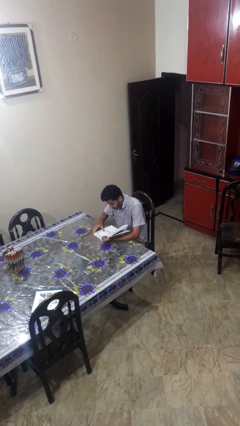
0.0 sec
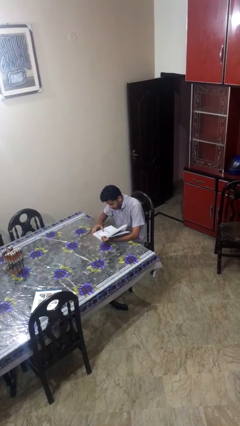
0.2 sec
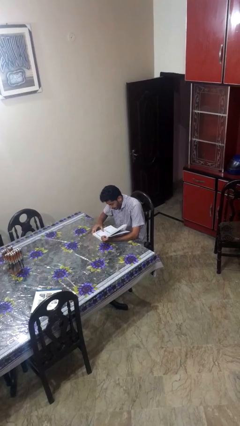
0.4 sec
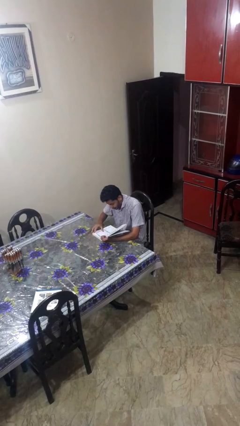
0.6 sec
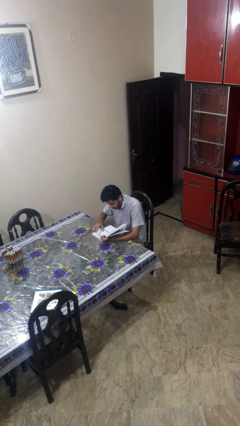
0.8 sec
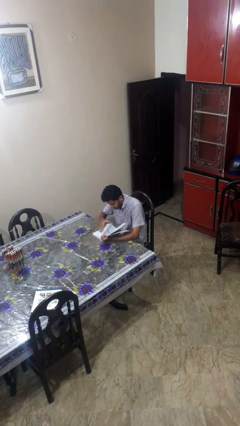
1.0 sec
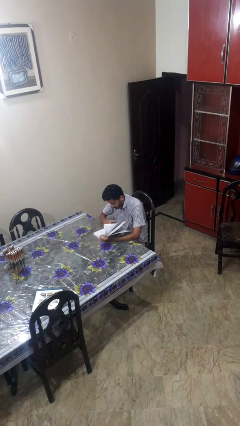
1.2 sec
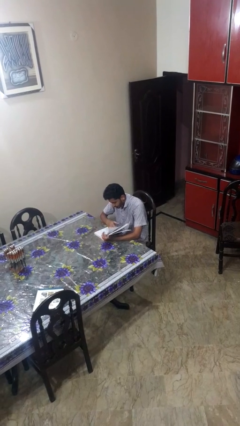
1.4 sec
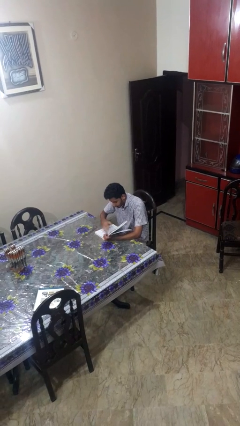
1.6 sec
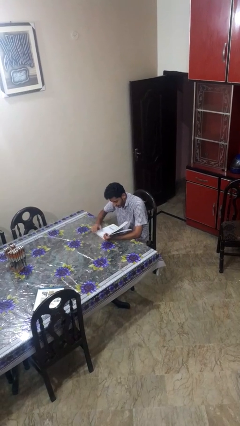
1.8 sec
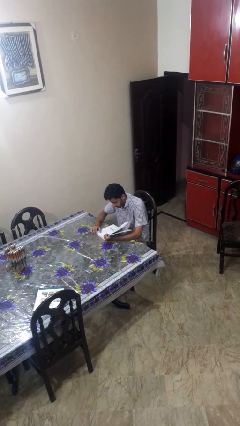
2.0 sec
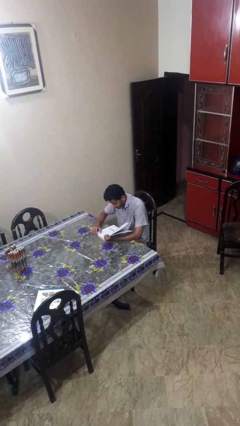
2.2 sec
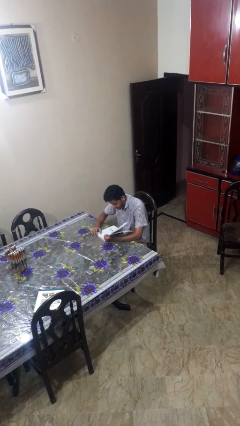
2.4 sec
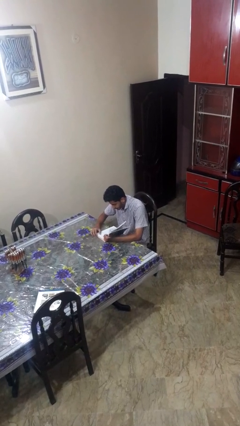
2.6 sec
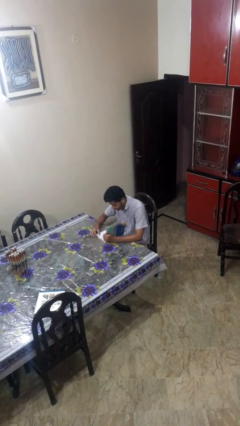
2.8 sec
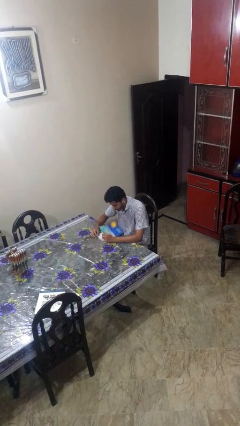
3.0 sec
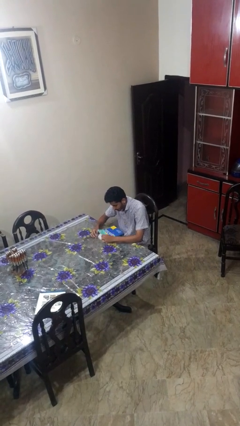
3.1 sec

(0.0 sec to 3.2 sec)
person reads book

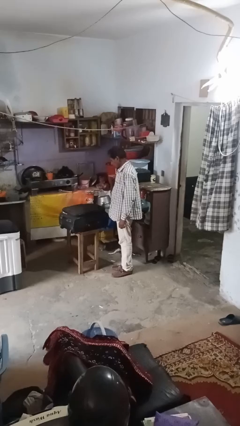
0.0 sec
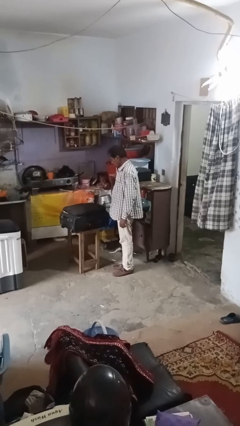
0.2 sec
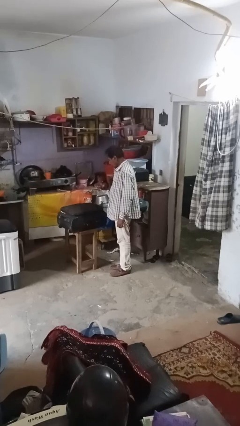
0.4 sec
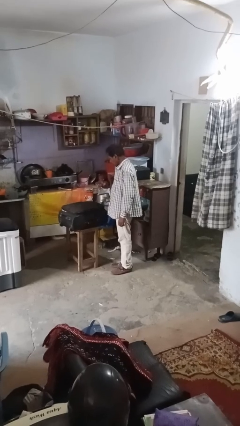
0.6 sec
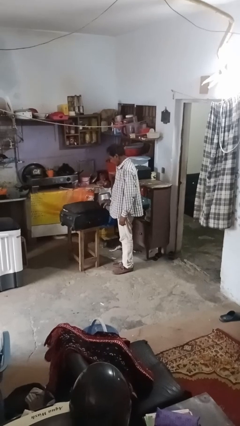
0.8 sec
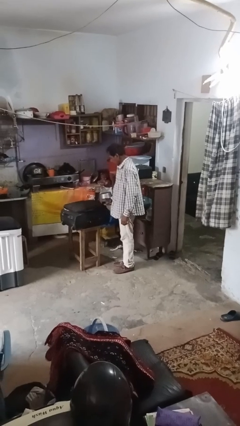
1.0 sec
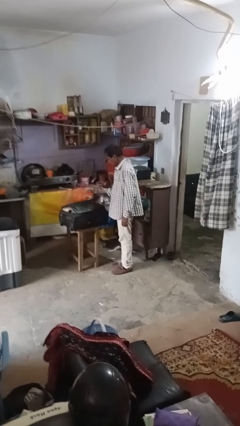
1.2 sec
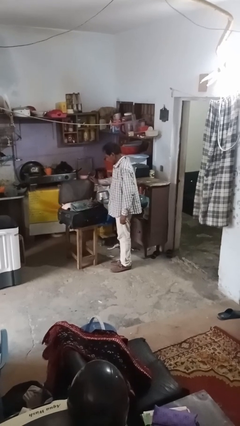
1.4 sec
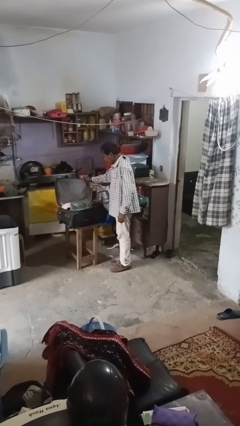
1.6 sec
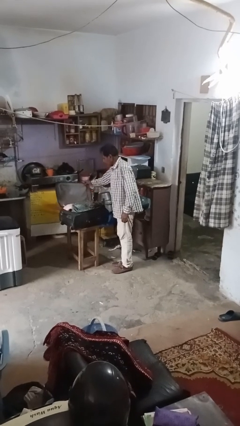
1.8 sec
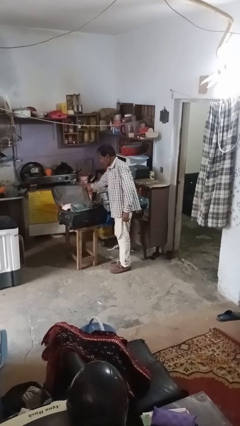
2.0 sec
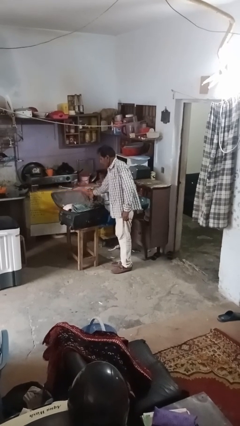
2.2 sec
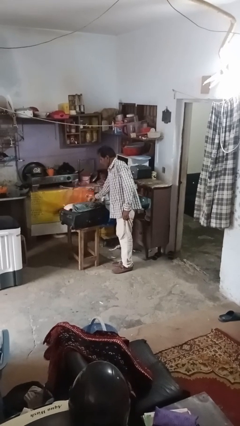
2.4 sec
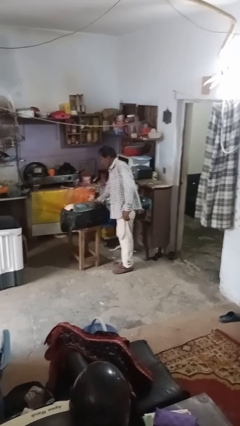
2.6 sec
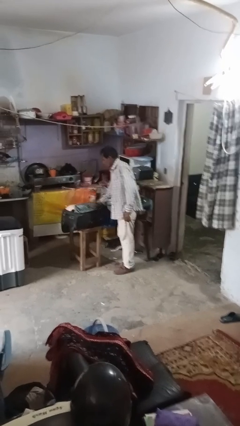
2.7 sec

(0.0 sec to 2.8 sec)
person opens suitcase

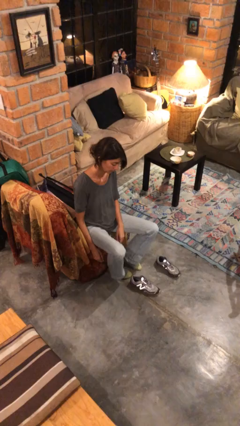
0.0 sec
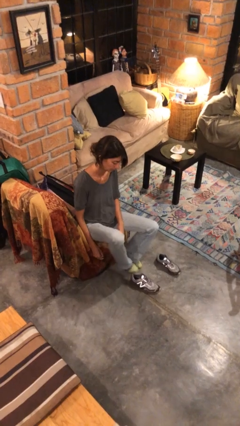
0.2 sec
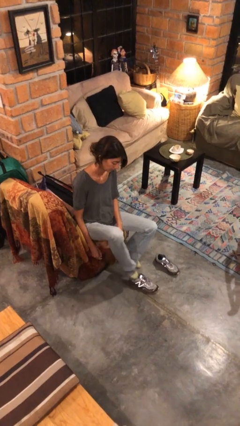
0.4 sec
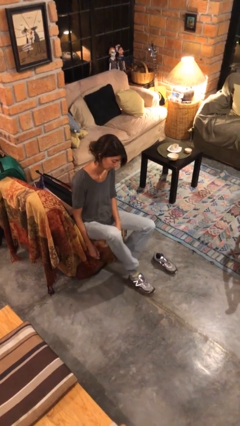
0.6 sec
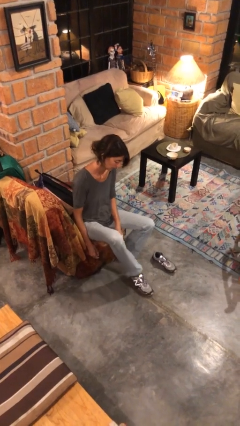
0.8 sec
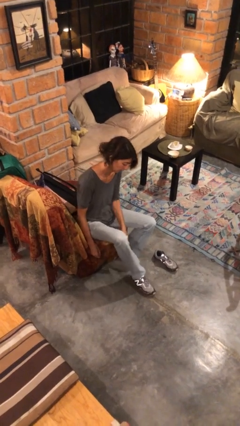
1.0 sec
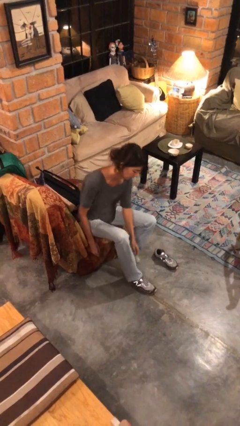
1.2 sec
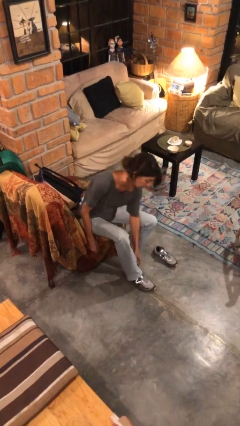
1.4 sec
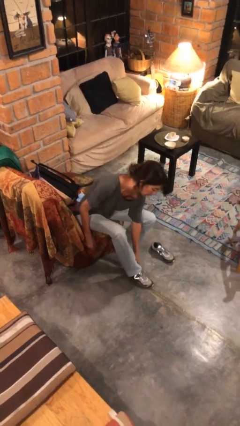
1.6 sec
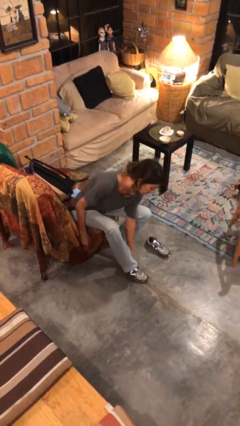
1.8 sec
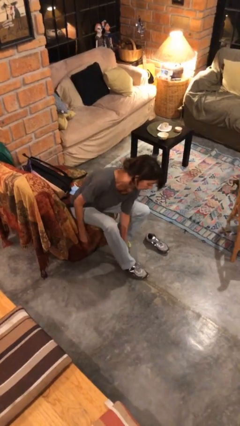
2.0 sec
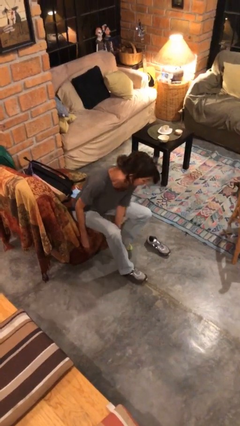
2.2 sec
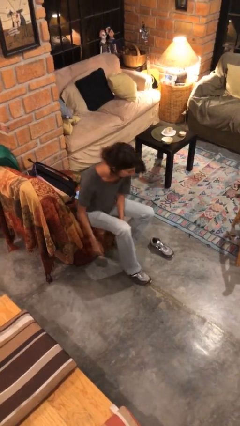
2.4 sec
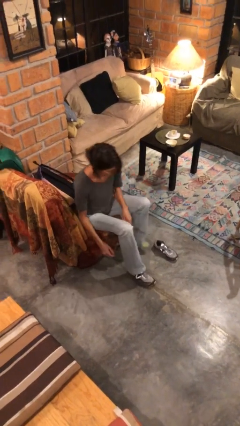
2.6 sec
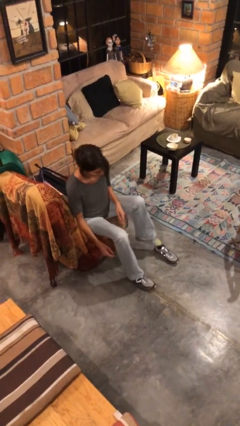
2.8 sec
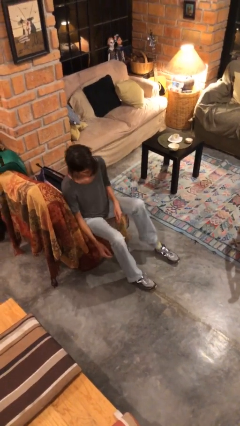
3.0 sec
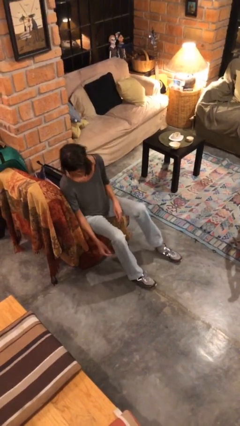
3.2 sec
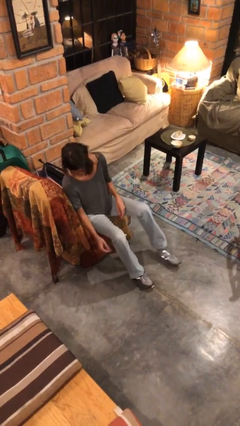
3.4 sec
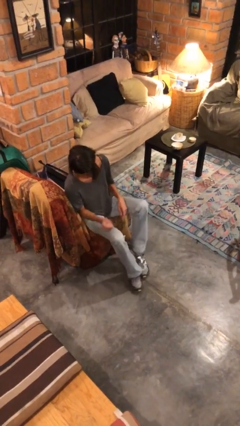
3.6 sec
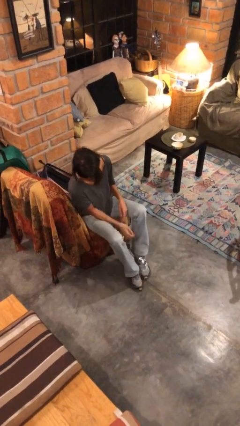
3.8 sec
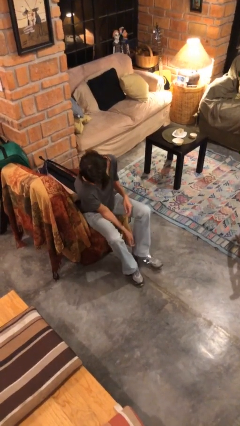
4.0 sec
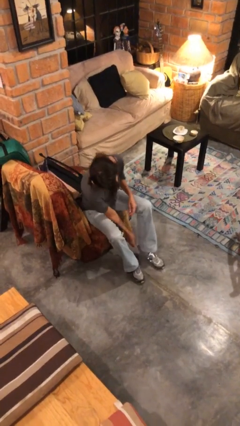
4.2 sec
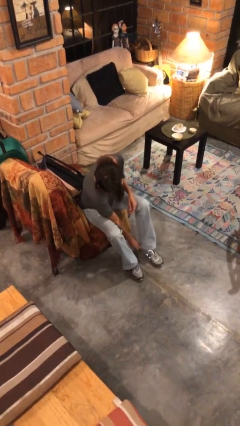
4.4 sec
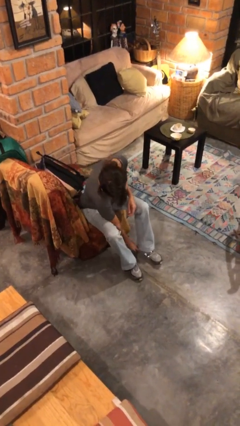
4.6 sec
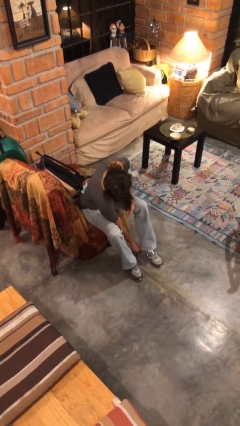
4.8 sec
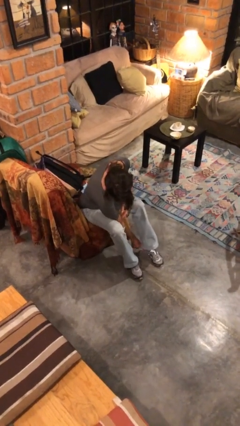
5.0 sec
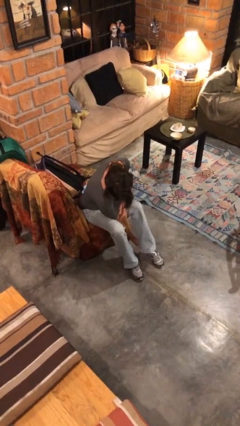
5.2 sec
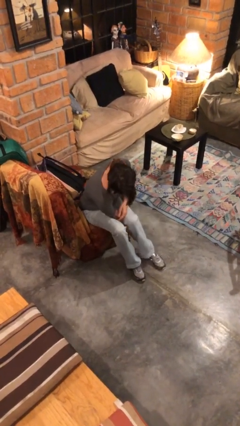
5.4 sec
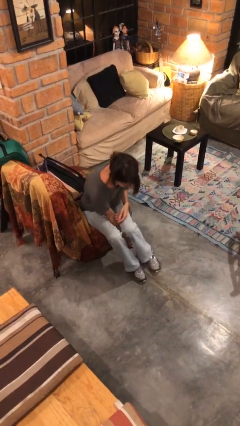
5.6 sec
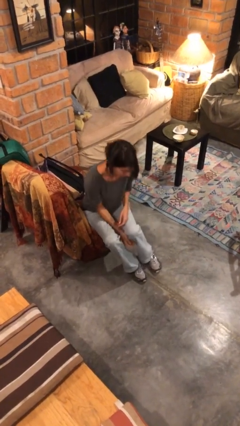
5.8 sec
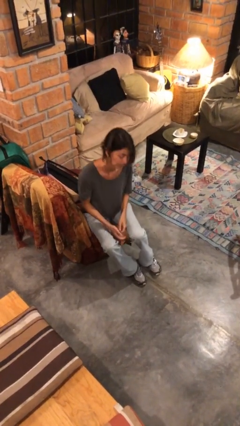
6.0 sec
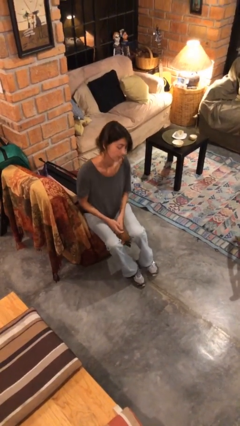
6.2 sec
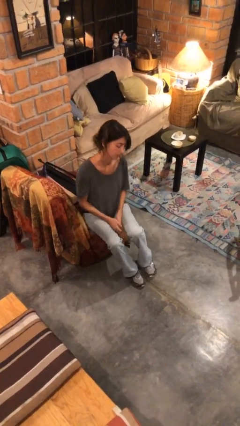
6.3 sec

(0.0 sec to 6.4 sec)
person puts on shoes

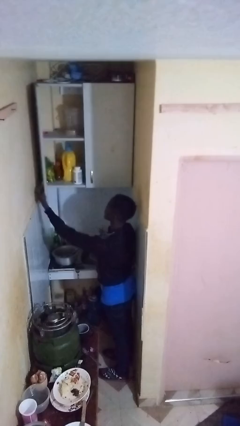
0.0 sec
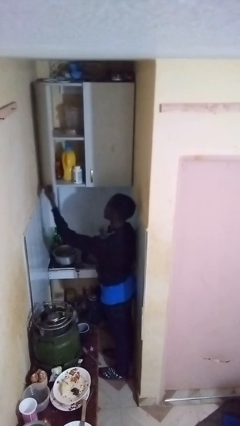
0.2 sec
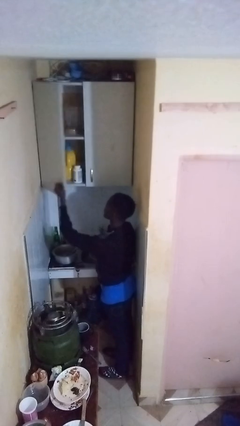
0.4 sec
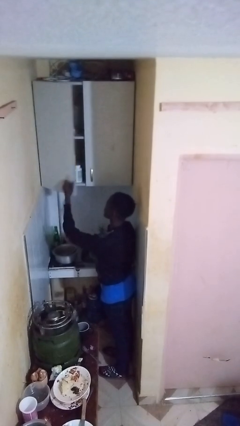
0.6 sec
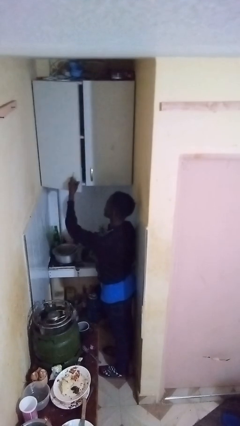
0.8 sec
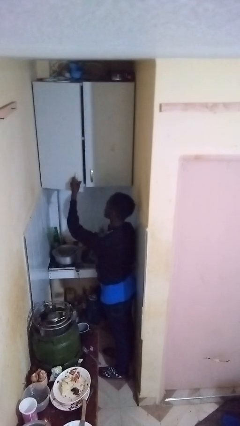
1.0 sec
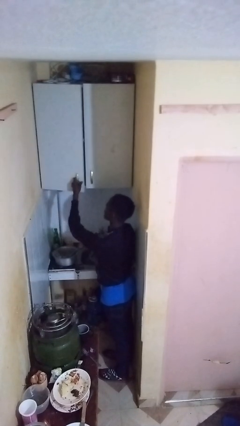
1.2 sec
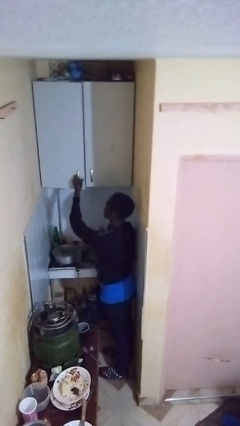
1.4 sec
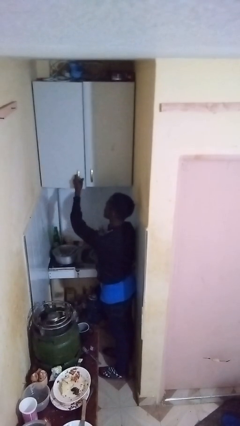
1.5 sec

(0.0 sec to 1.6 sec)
person closes kitchen drawer

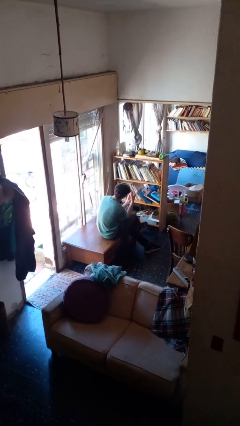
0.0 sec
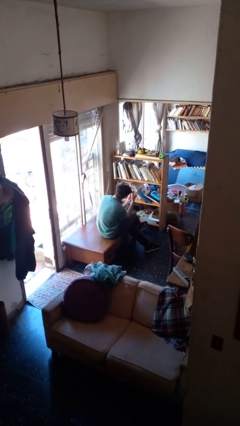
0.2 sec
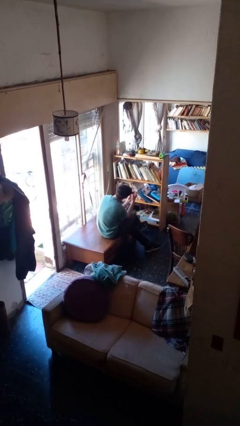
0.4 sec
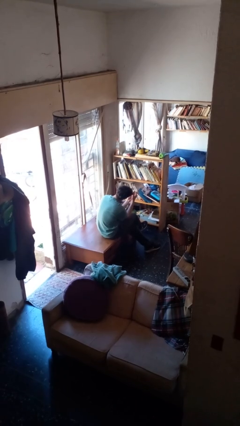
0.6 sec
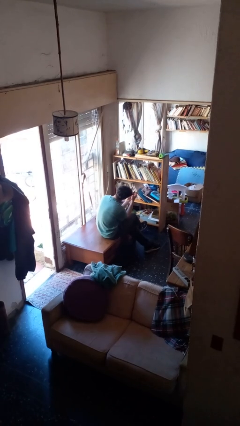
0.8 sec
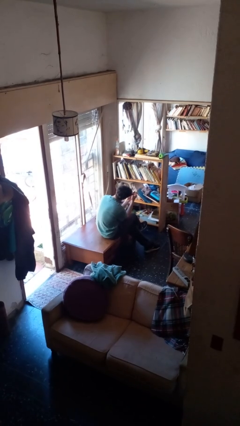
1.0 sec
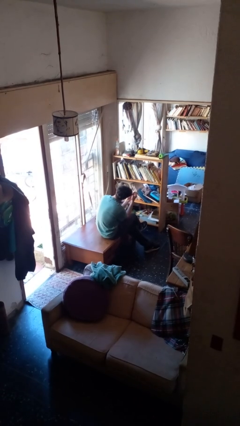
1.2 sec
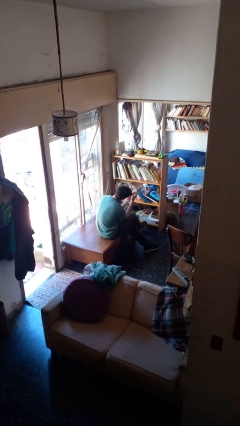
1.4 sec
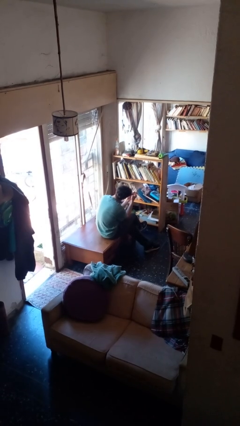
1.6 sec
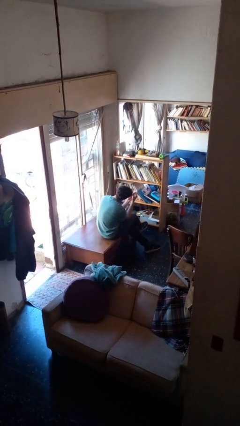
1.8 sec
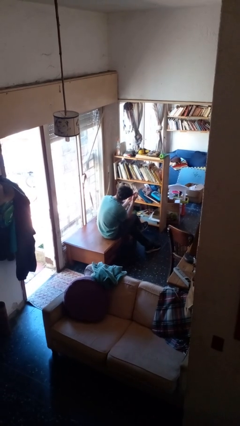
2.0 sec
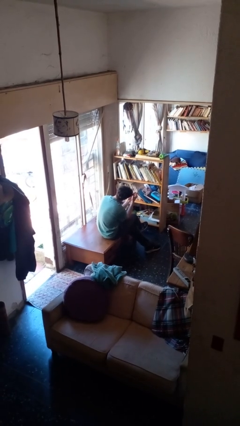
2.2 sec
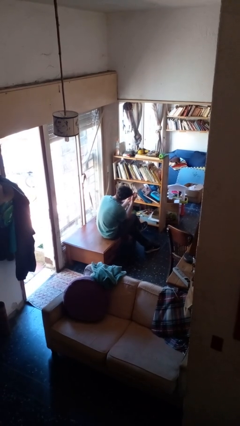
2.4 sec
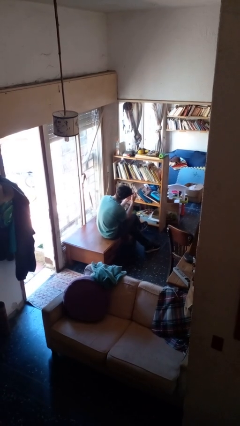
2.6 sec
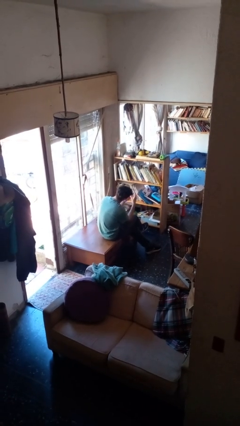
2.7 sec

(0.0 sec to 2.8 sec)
person paints fingernails

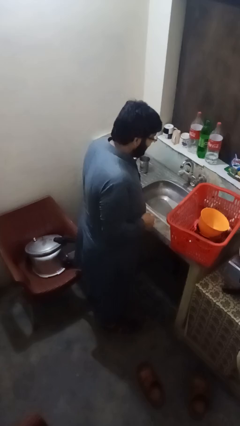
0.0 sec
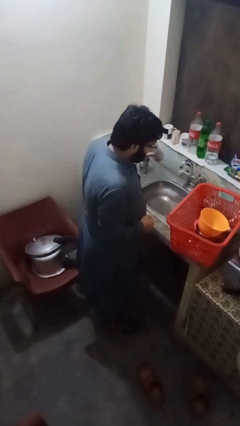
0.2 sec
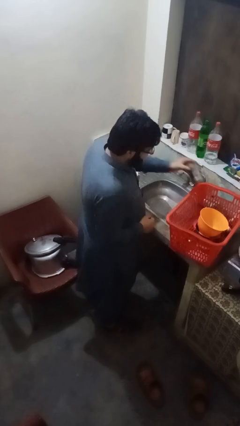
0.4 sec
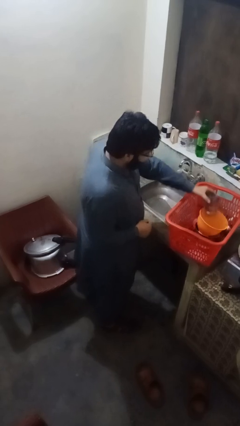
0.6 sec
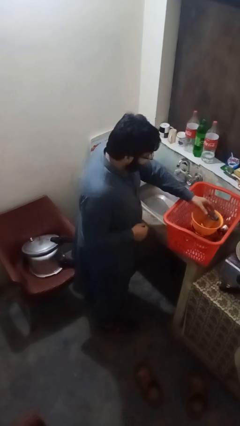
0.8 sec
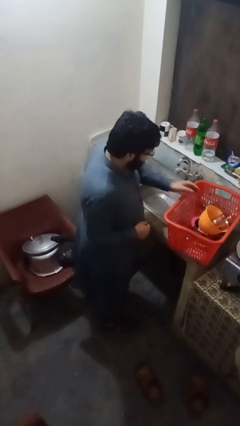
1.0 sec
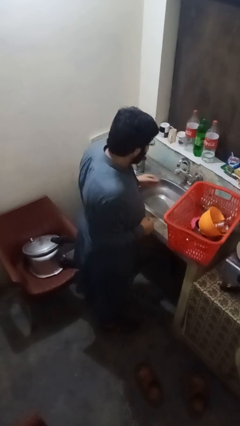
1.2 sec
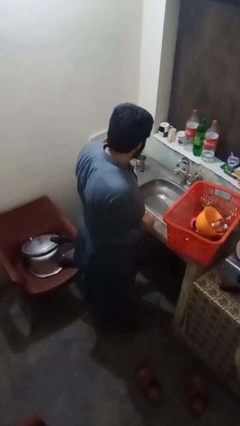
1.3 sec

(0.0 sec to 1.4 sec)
person loads dishwasher
